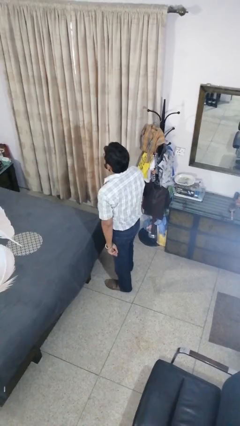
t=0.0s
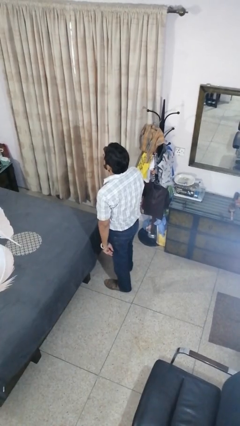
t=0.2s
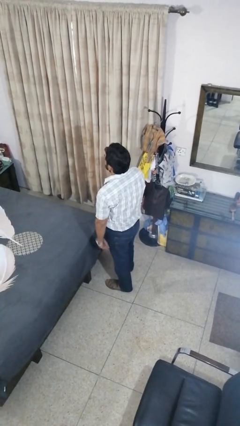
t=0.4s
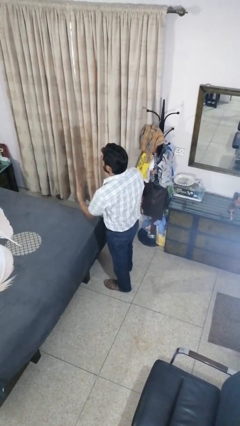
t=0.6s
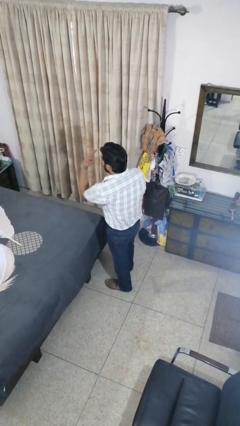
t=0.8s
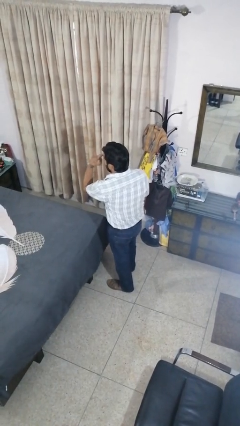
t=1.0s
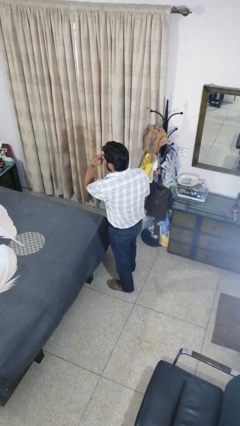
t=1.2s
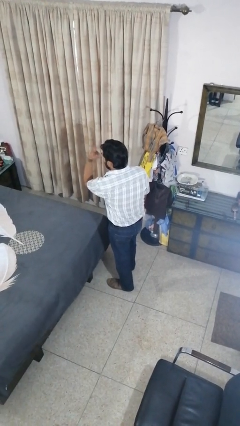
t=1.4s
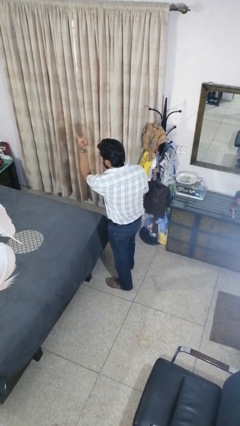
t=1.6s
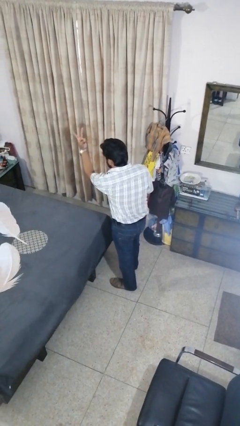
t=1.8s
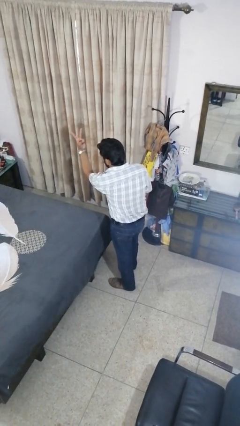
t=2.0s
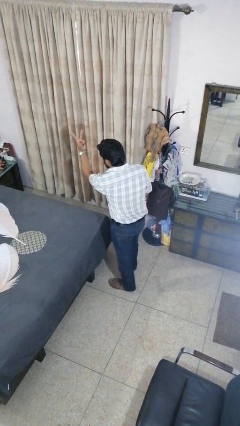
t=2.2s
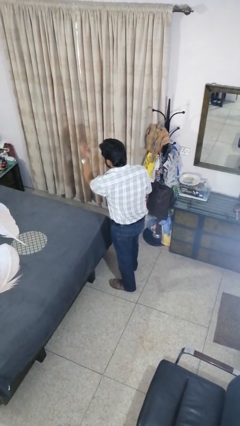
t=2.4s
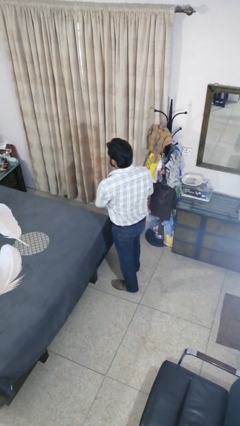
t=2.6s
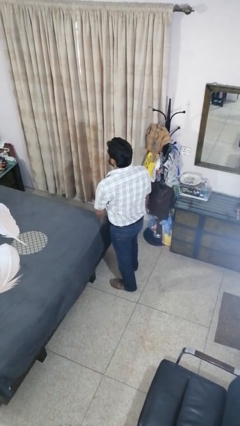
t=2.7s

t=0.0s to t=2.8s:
person gestures watch closely

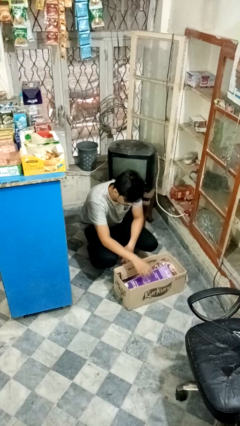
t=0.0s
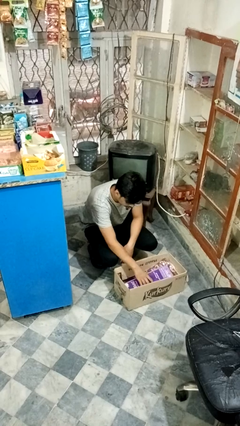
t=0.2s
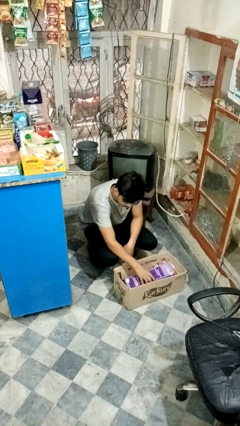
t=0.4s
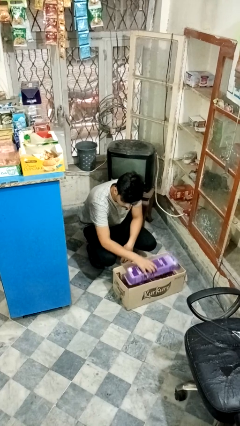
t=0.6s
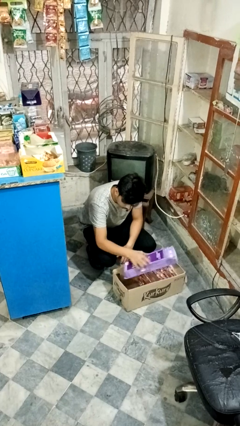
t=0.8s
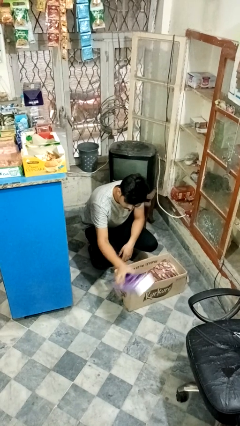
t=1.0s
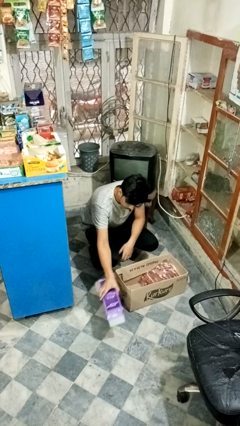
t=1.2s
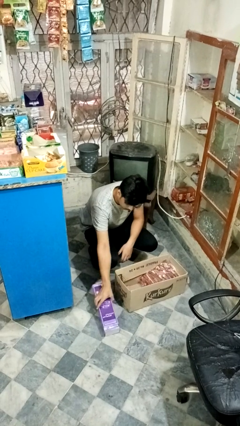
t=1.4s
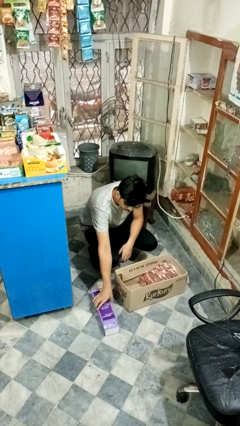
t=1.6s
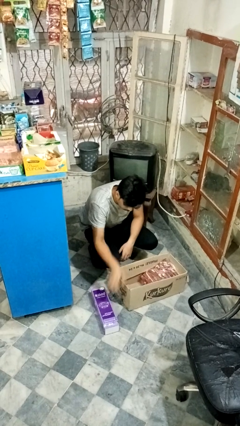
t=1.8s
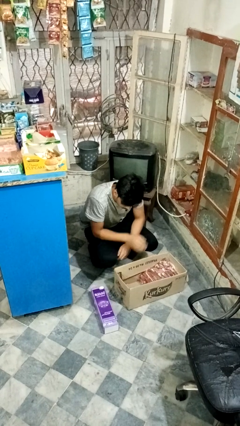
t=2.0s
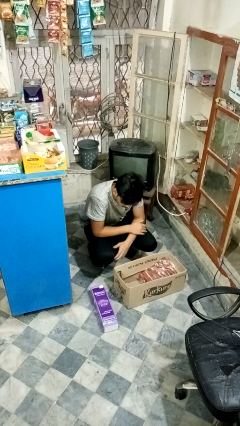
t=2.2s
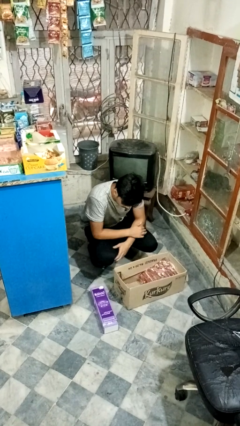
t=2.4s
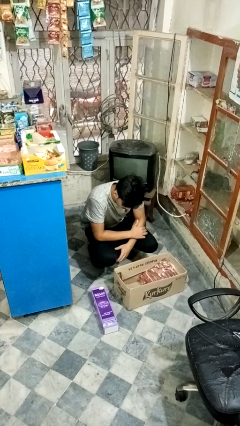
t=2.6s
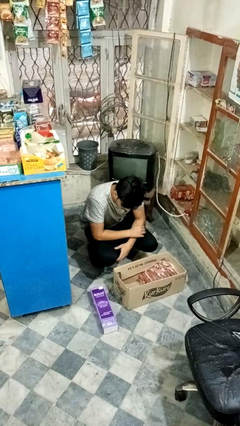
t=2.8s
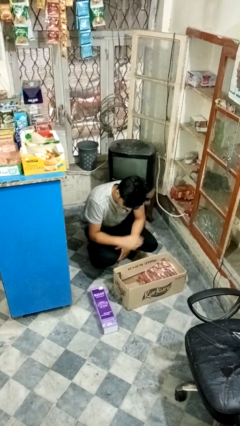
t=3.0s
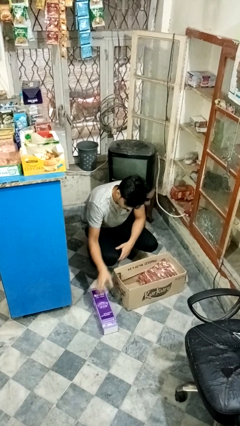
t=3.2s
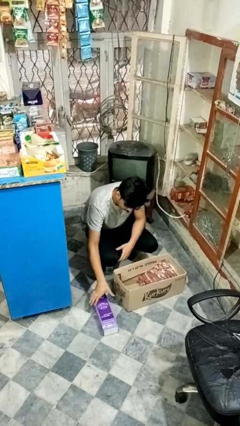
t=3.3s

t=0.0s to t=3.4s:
person takes object from box

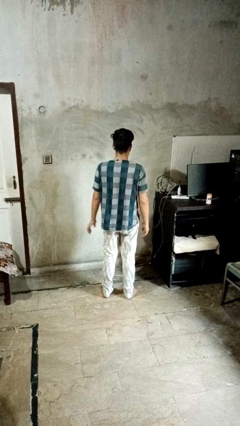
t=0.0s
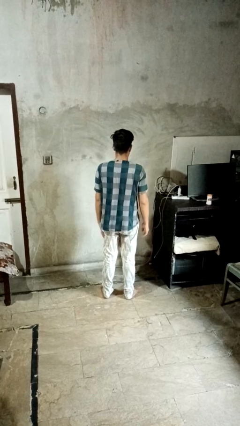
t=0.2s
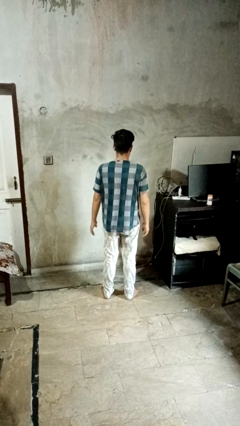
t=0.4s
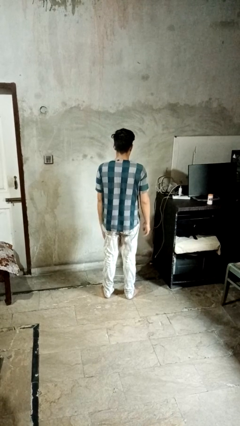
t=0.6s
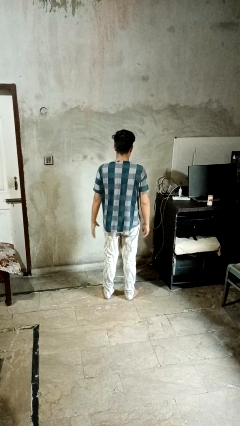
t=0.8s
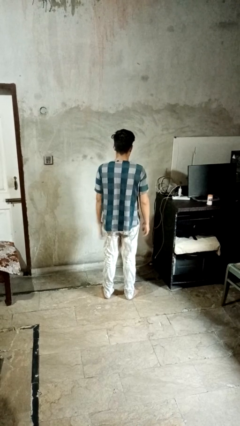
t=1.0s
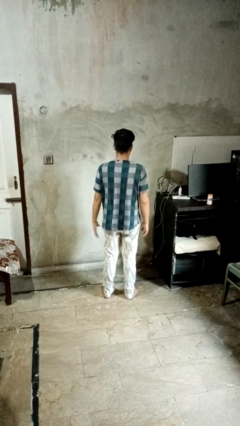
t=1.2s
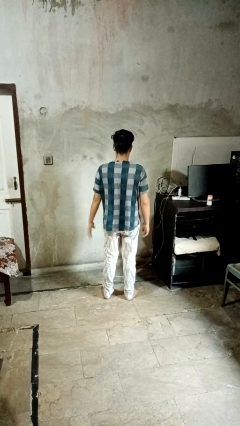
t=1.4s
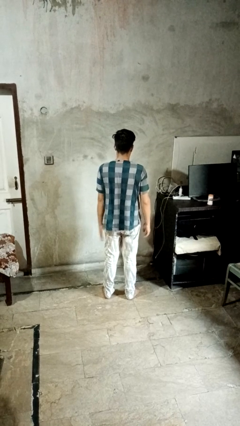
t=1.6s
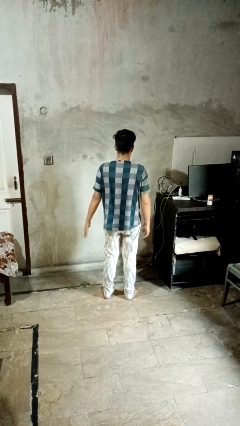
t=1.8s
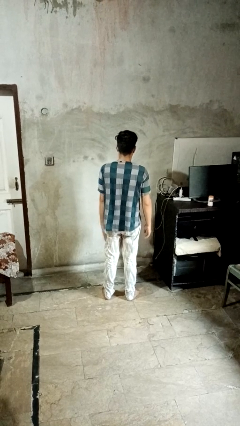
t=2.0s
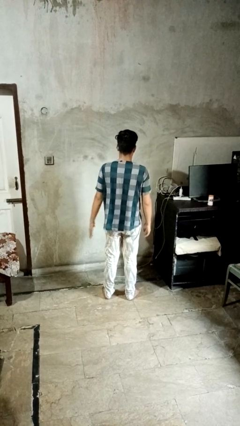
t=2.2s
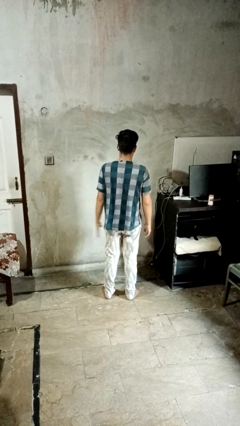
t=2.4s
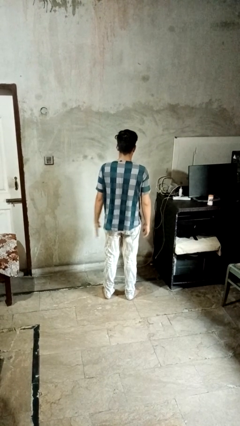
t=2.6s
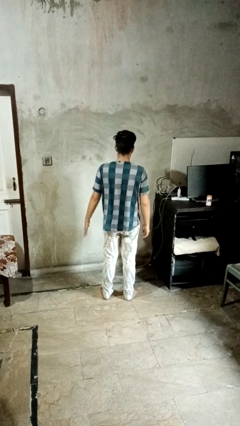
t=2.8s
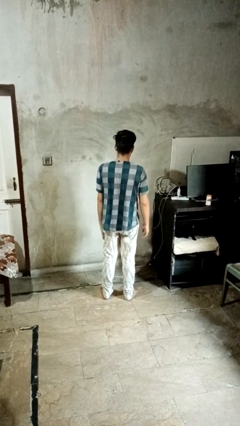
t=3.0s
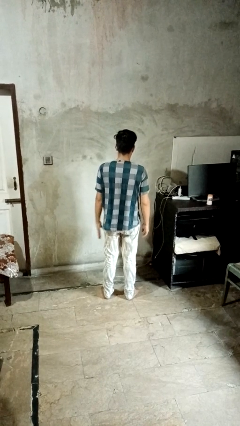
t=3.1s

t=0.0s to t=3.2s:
person slaps hands on thighs

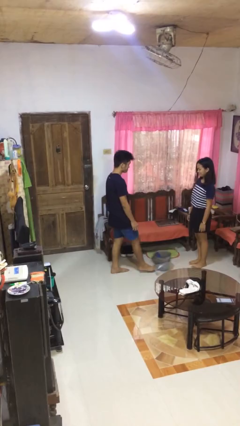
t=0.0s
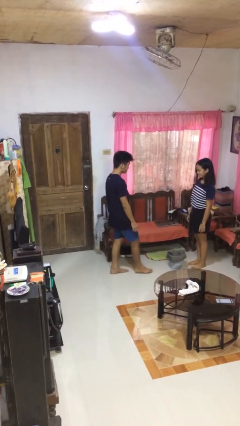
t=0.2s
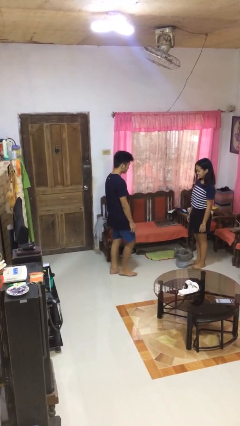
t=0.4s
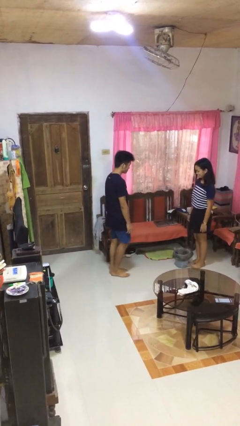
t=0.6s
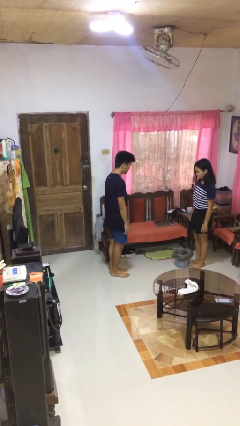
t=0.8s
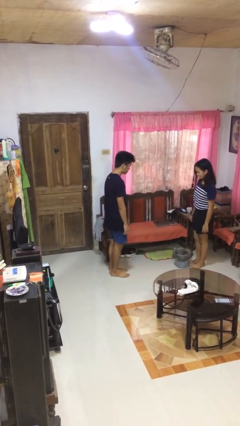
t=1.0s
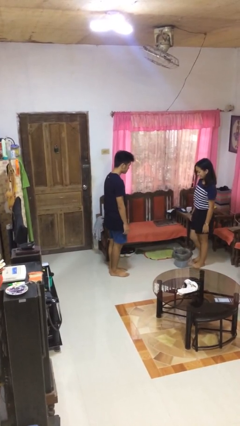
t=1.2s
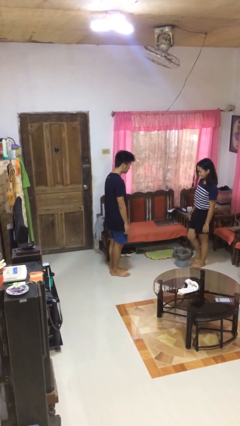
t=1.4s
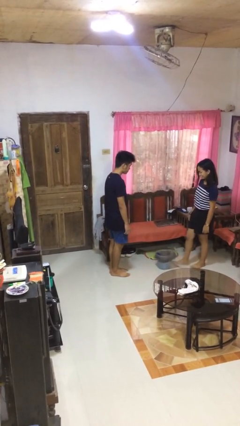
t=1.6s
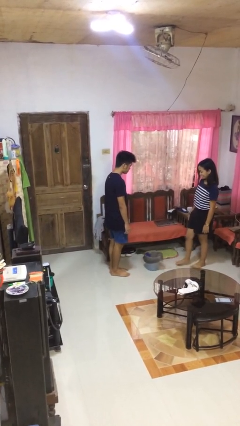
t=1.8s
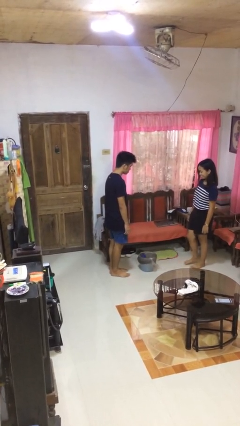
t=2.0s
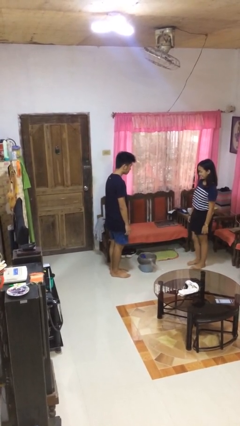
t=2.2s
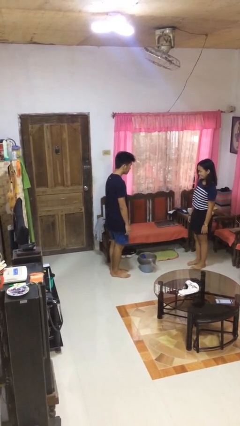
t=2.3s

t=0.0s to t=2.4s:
person kicks object to person

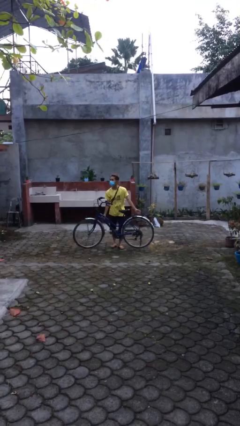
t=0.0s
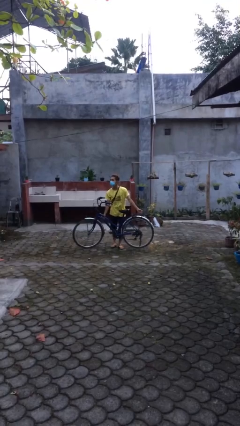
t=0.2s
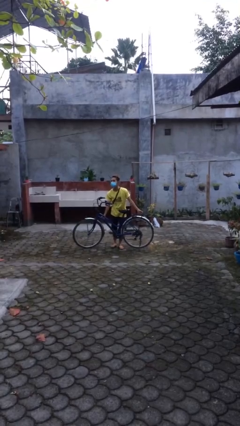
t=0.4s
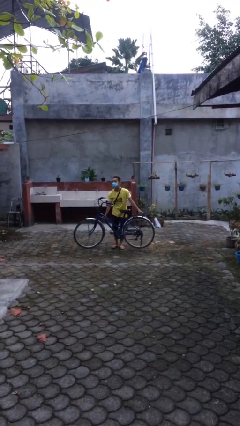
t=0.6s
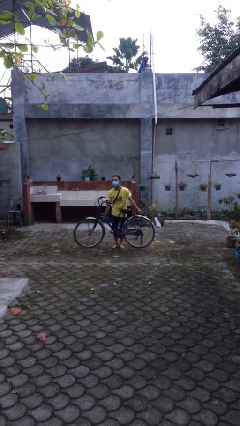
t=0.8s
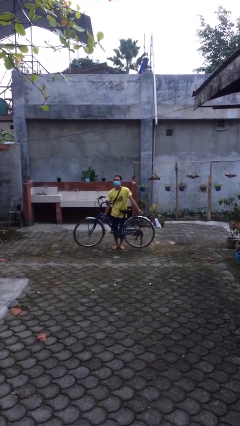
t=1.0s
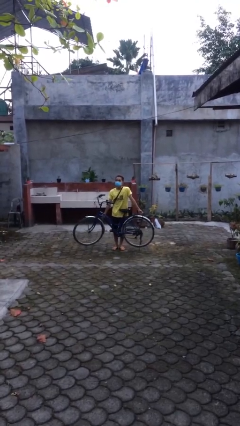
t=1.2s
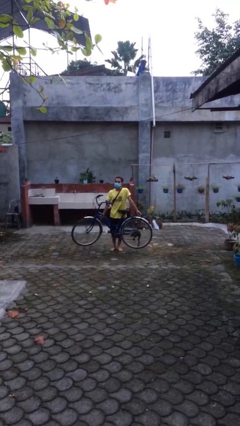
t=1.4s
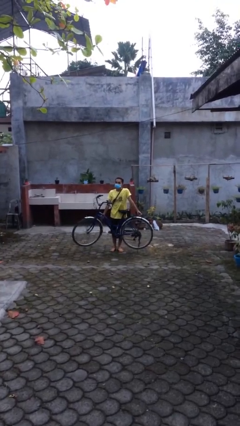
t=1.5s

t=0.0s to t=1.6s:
person picks up object from floor

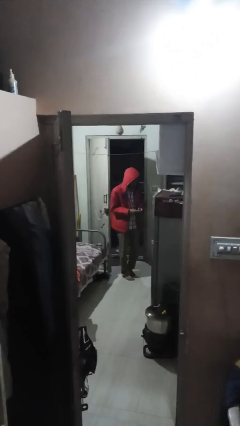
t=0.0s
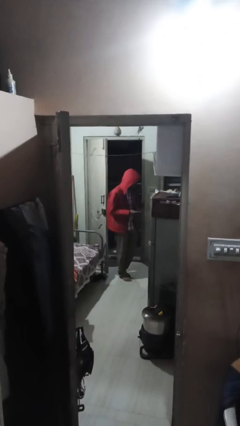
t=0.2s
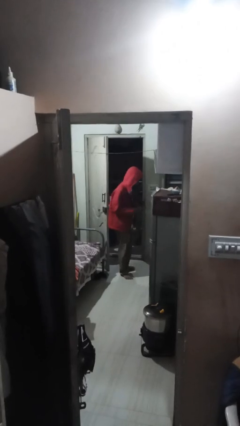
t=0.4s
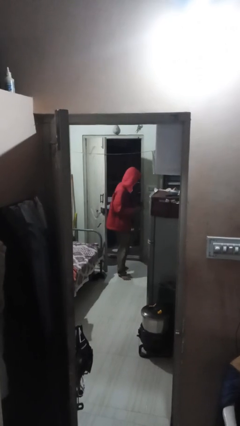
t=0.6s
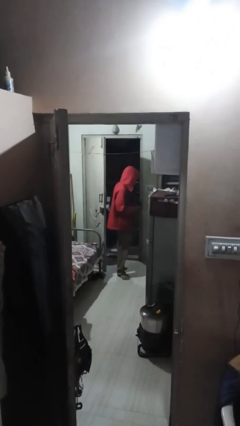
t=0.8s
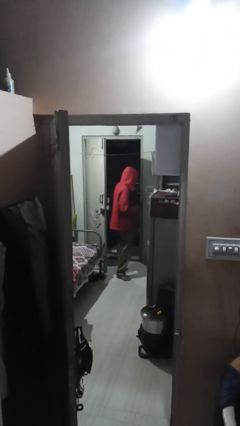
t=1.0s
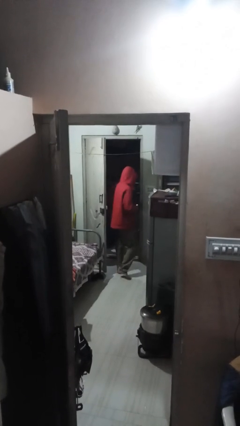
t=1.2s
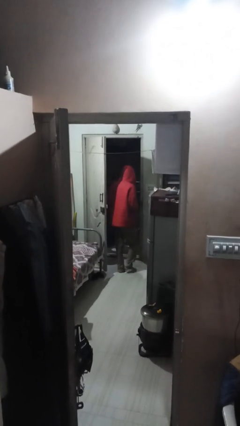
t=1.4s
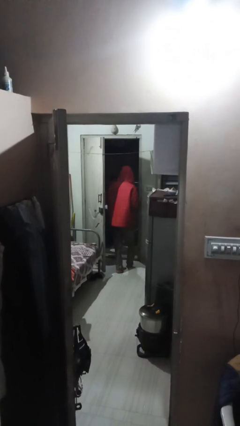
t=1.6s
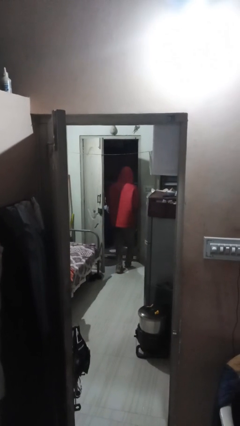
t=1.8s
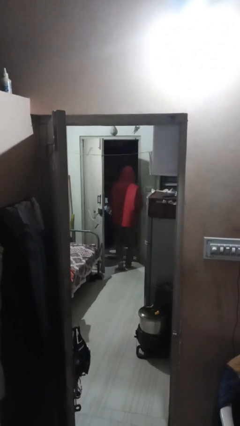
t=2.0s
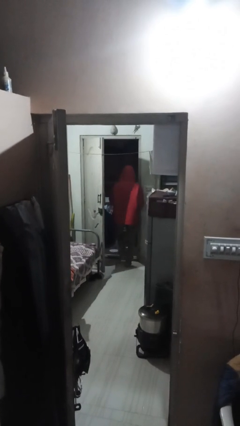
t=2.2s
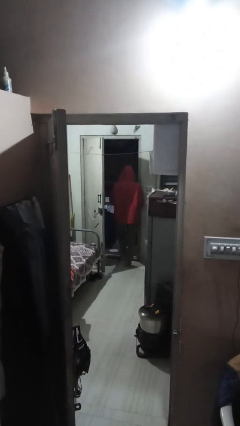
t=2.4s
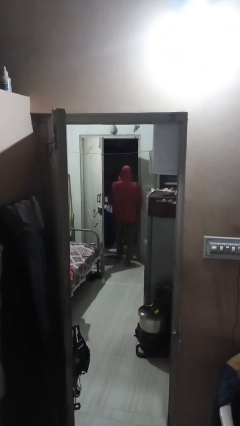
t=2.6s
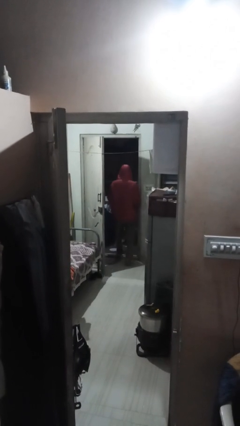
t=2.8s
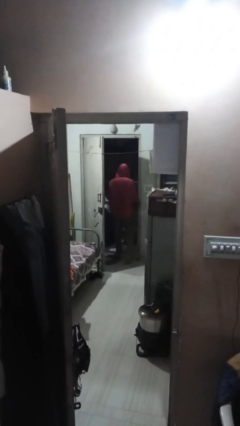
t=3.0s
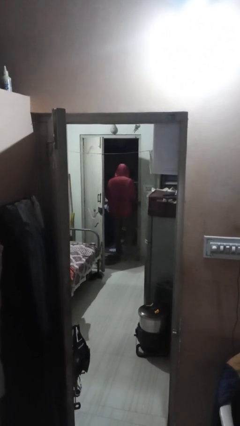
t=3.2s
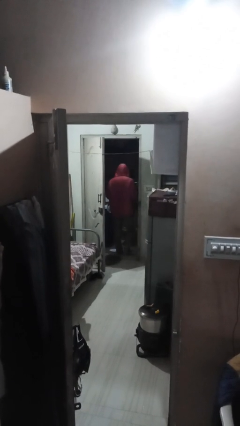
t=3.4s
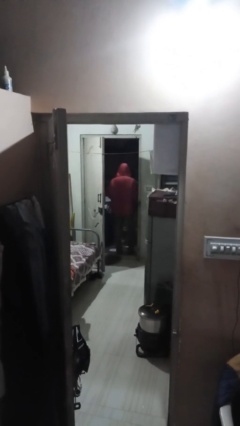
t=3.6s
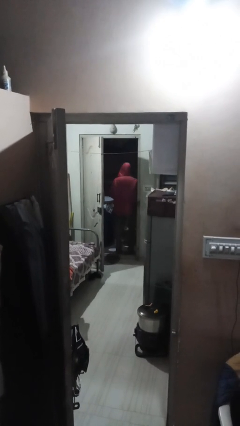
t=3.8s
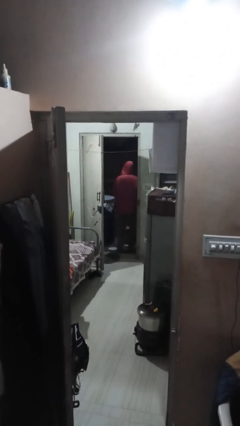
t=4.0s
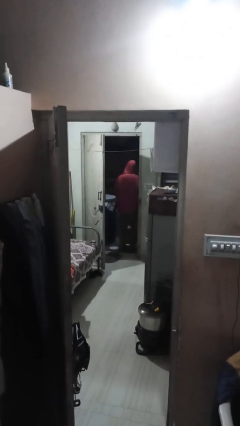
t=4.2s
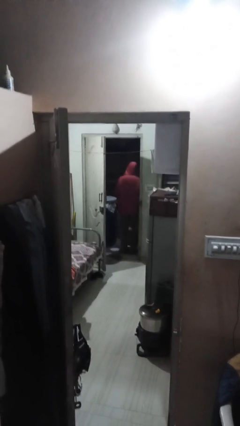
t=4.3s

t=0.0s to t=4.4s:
person exits scene through structure
